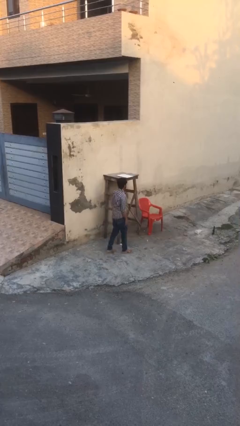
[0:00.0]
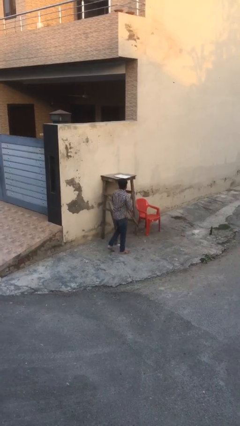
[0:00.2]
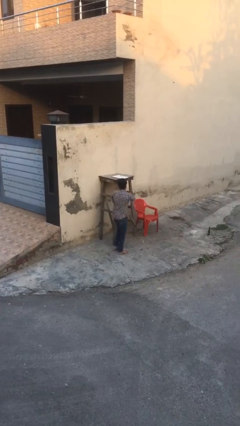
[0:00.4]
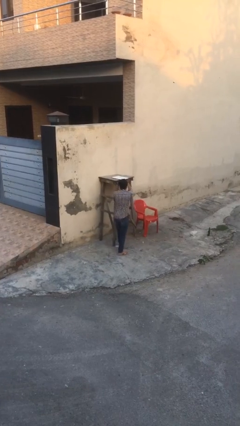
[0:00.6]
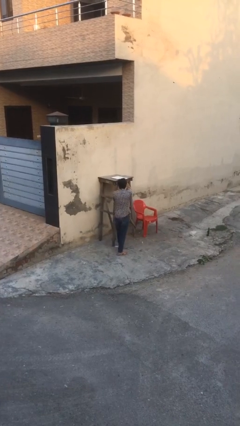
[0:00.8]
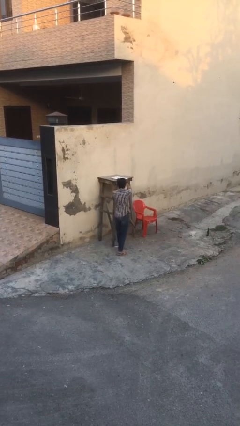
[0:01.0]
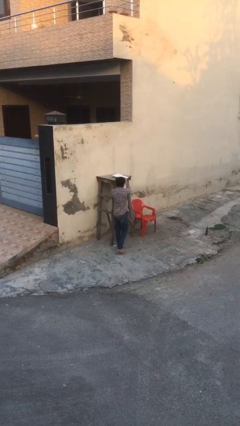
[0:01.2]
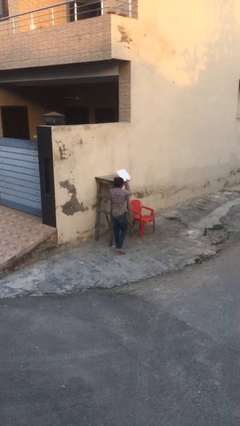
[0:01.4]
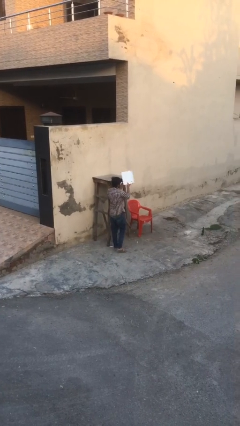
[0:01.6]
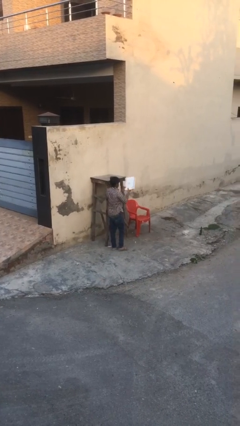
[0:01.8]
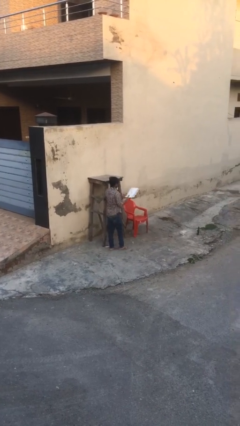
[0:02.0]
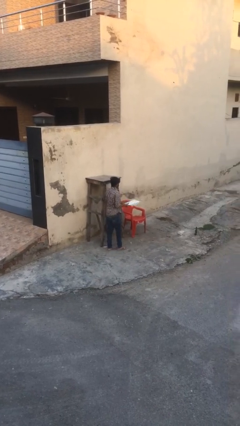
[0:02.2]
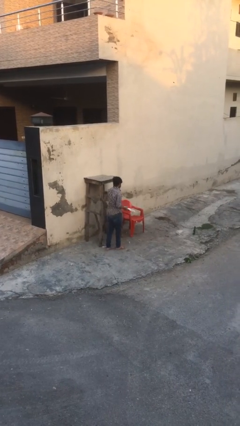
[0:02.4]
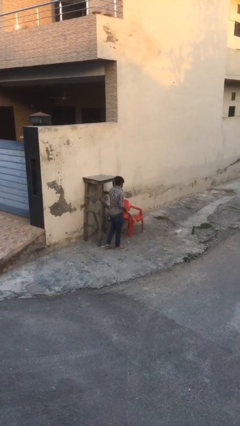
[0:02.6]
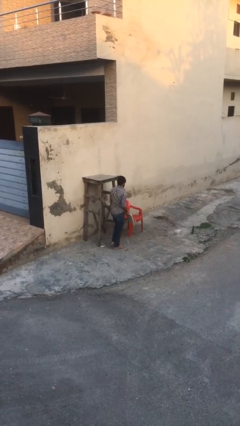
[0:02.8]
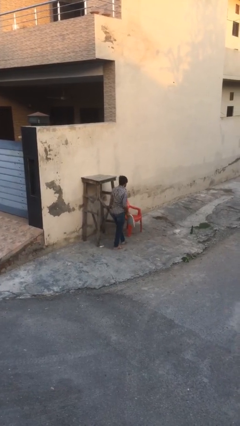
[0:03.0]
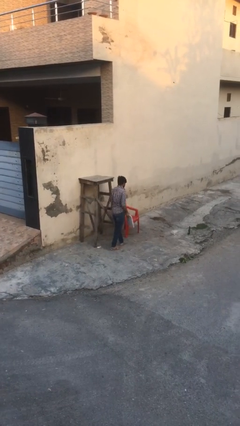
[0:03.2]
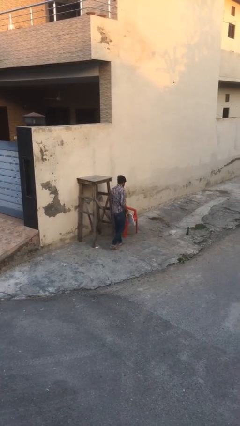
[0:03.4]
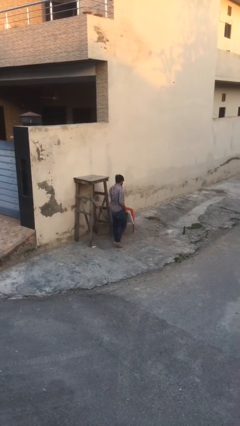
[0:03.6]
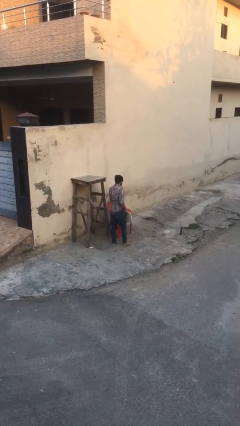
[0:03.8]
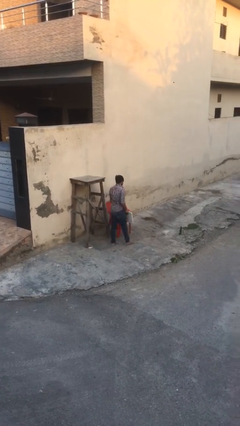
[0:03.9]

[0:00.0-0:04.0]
person picks up object from shelf

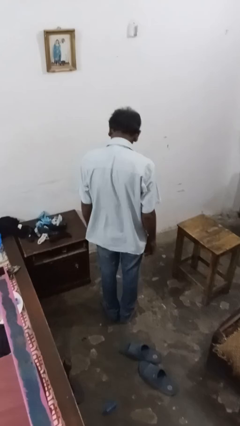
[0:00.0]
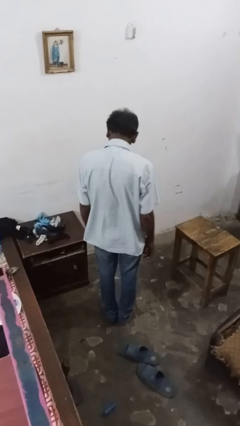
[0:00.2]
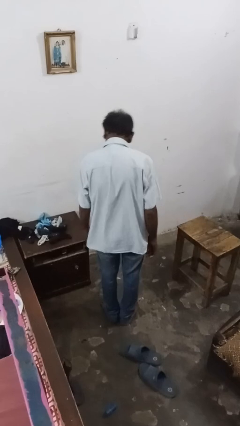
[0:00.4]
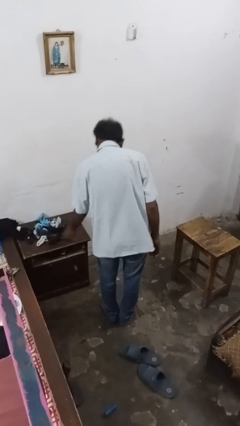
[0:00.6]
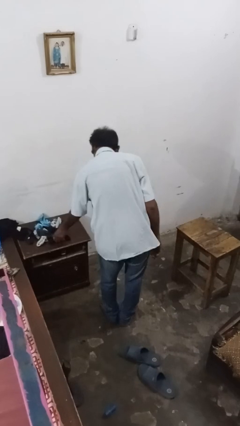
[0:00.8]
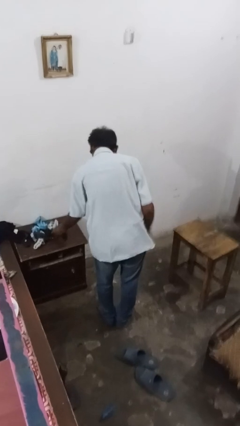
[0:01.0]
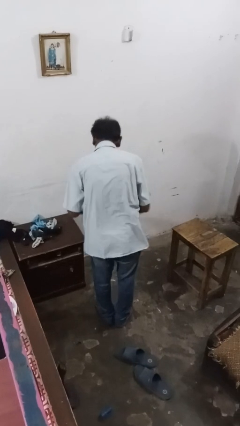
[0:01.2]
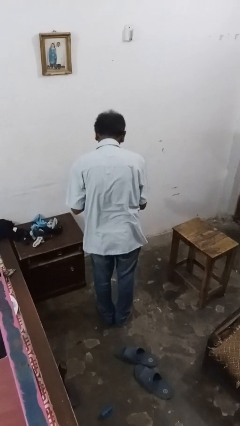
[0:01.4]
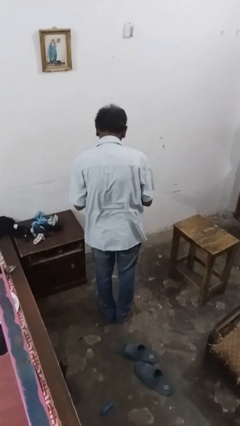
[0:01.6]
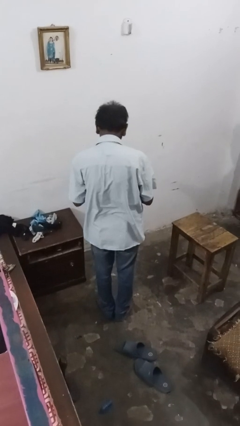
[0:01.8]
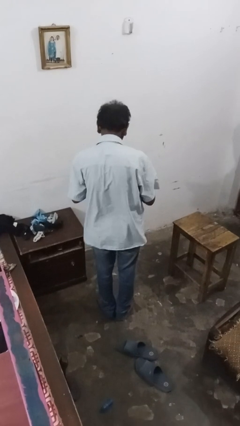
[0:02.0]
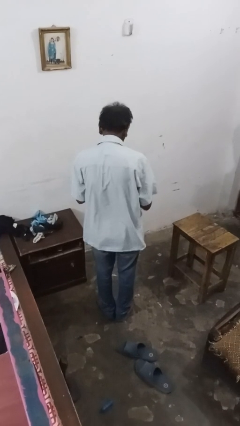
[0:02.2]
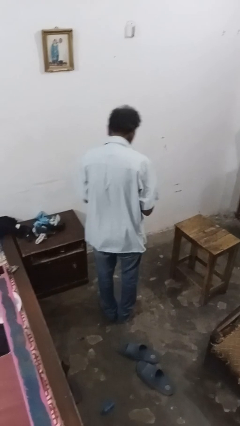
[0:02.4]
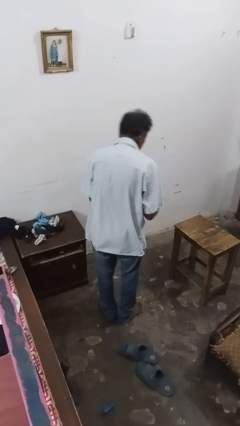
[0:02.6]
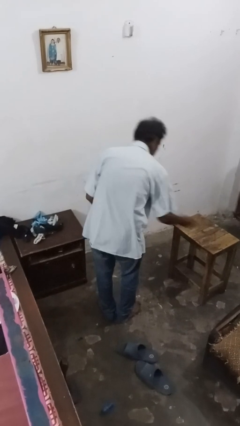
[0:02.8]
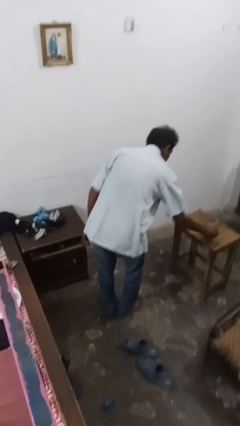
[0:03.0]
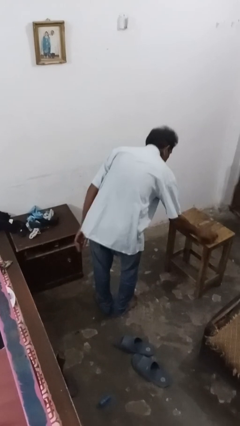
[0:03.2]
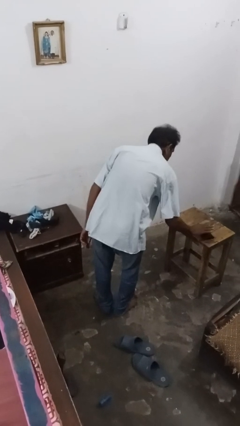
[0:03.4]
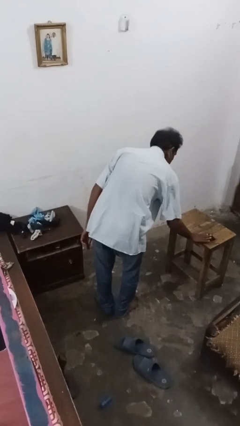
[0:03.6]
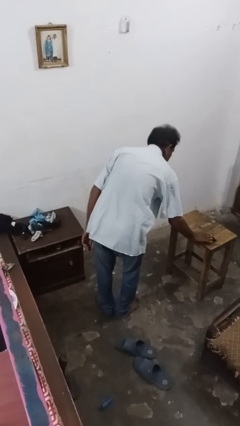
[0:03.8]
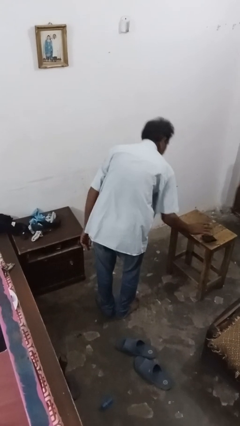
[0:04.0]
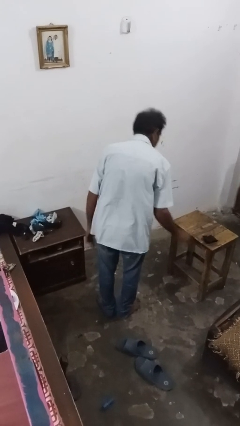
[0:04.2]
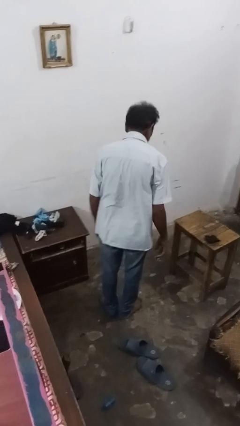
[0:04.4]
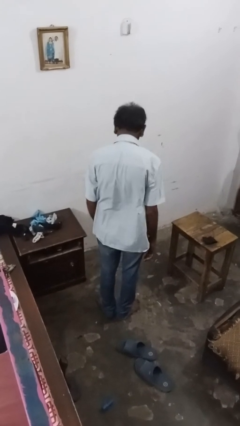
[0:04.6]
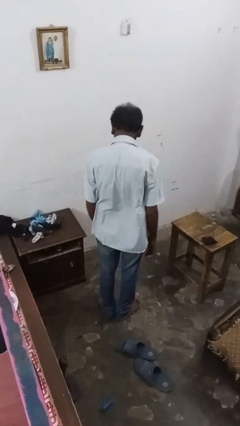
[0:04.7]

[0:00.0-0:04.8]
person folds socks

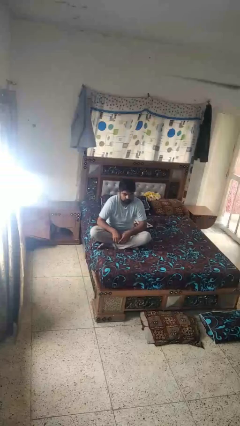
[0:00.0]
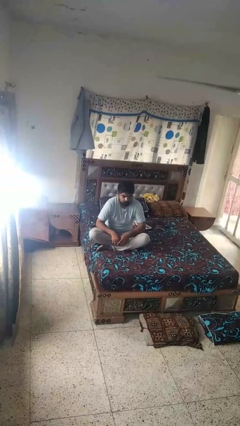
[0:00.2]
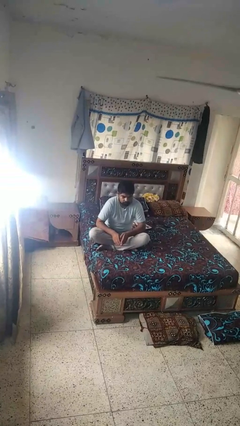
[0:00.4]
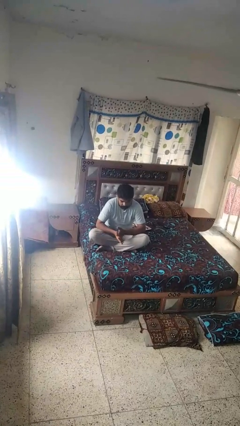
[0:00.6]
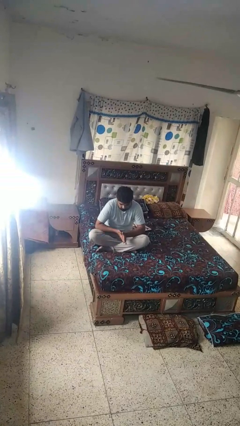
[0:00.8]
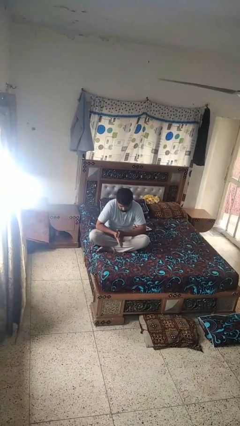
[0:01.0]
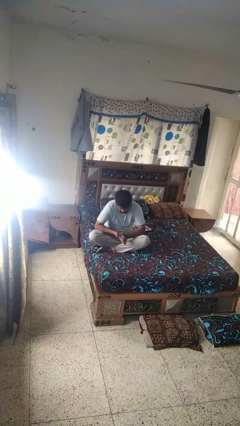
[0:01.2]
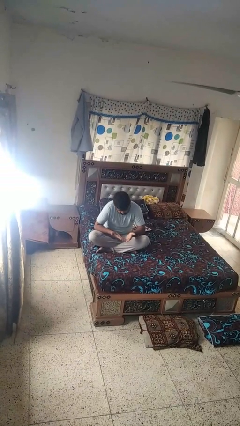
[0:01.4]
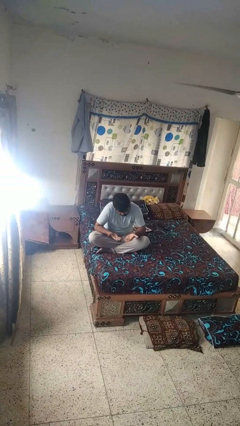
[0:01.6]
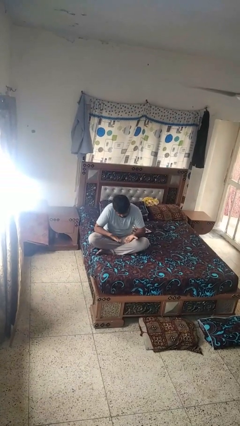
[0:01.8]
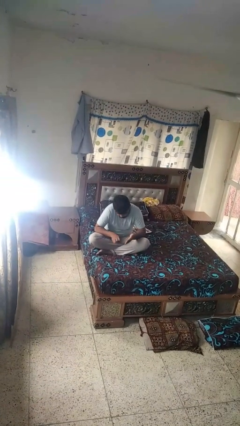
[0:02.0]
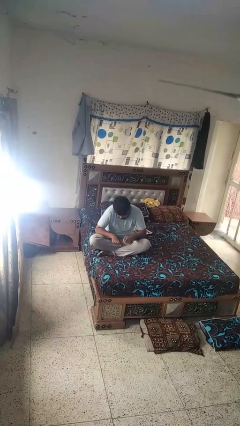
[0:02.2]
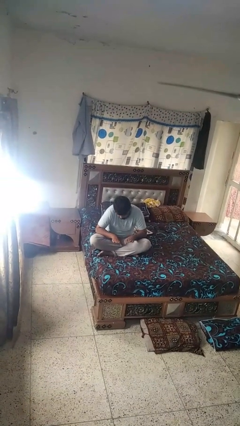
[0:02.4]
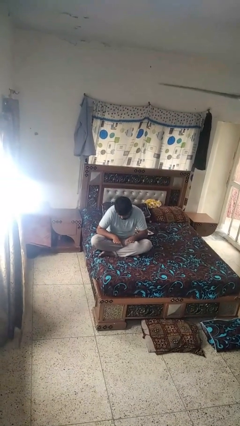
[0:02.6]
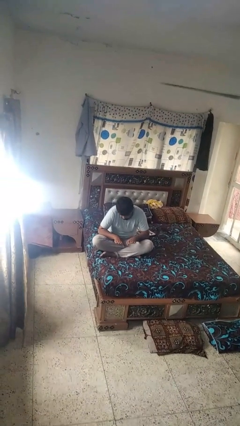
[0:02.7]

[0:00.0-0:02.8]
person looks at hands in lap

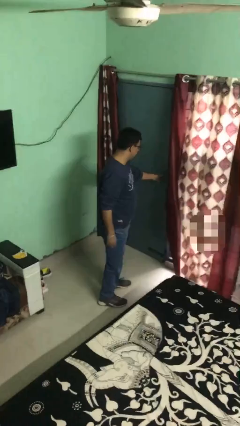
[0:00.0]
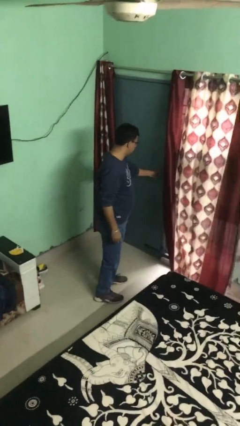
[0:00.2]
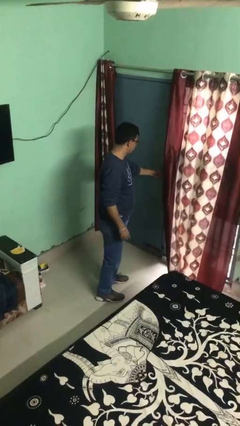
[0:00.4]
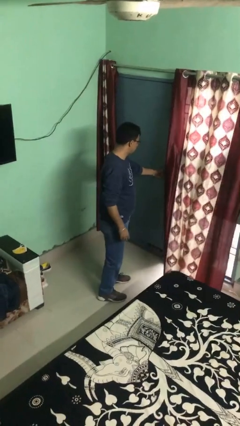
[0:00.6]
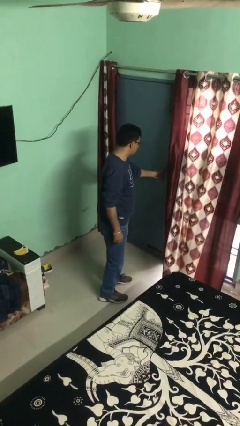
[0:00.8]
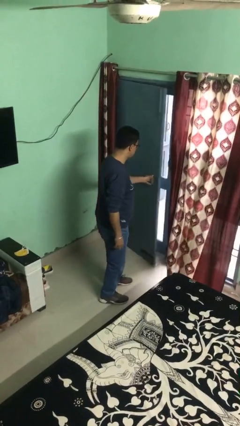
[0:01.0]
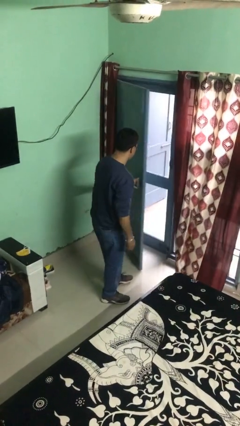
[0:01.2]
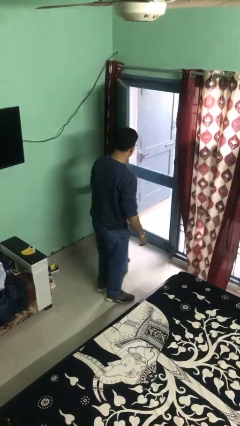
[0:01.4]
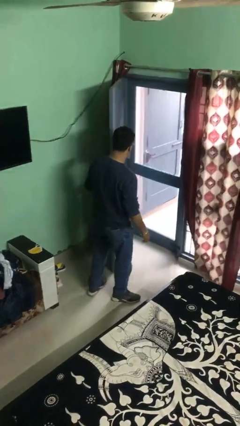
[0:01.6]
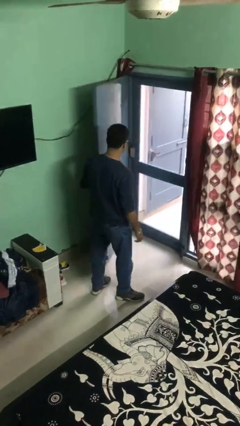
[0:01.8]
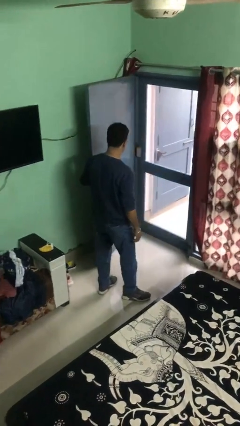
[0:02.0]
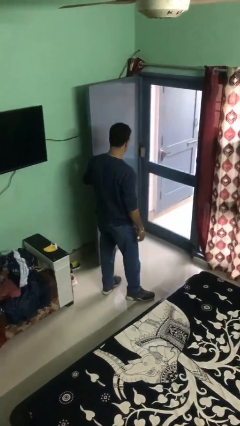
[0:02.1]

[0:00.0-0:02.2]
person opens facility door

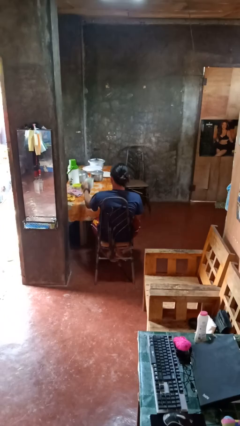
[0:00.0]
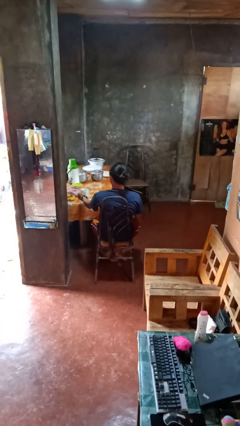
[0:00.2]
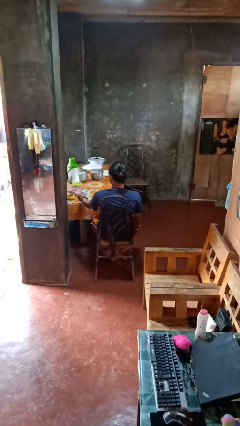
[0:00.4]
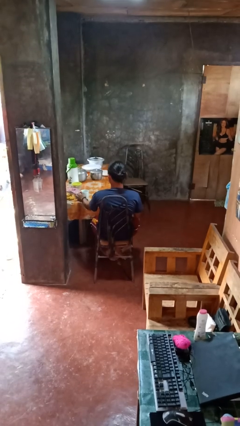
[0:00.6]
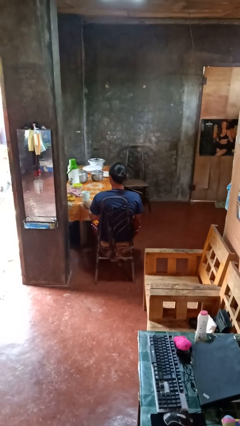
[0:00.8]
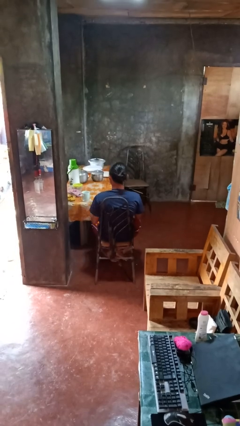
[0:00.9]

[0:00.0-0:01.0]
person puts down object on table

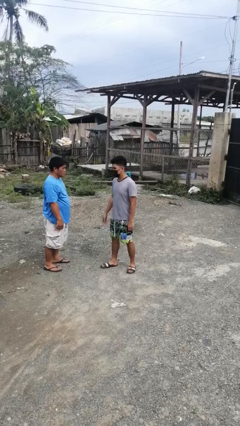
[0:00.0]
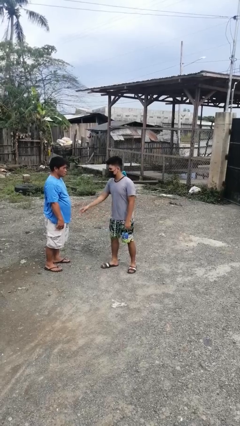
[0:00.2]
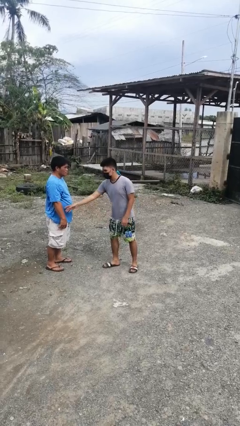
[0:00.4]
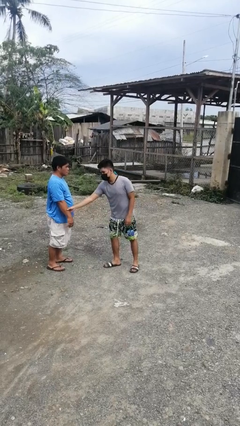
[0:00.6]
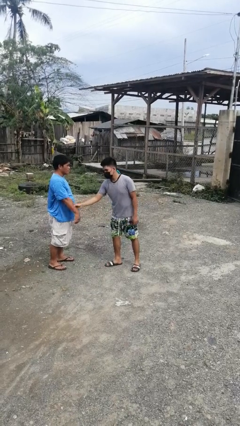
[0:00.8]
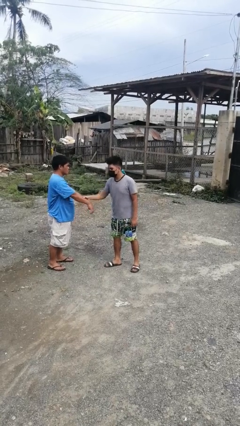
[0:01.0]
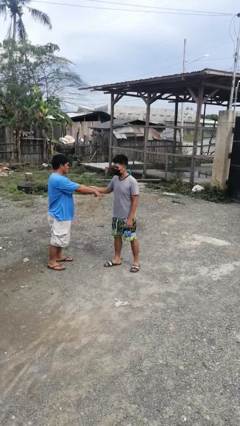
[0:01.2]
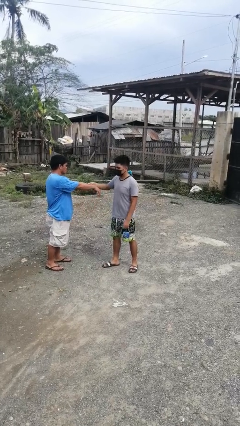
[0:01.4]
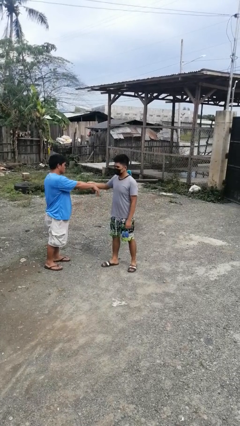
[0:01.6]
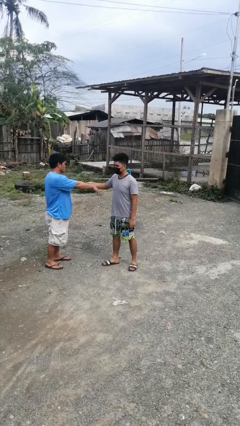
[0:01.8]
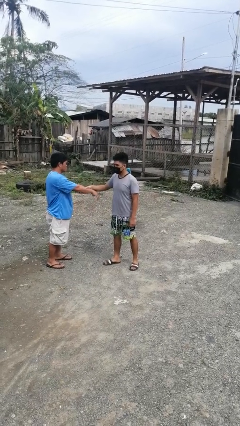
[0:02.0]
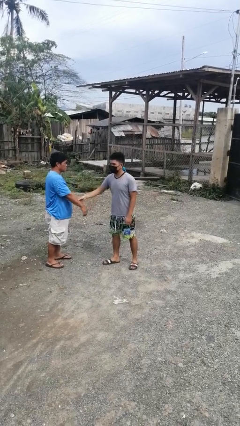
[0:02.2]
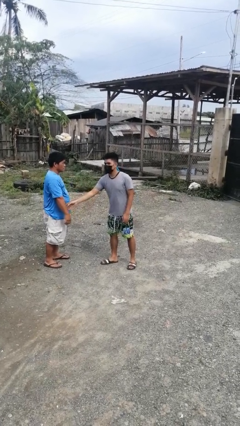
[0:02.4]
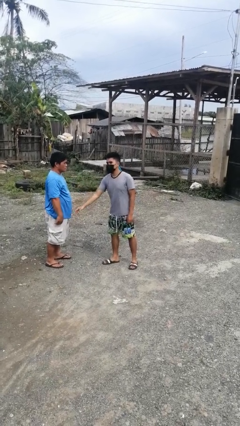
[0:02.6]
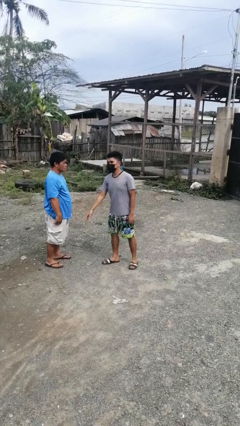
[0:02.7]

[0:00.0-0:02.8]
person grabs person by forearm
